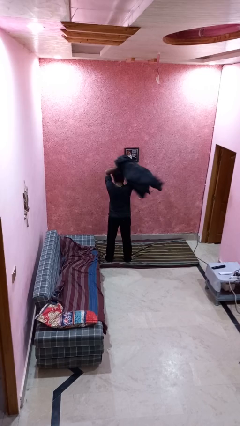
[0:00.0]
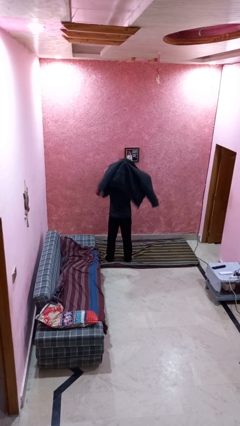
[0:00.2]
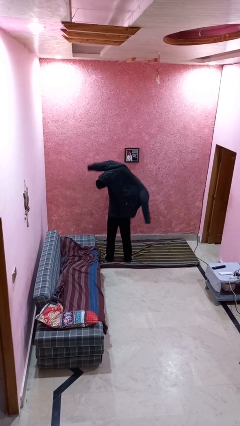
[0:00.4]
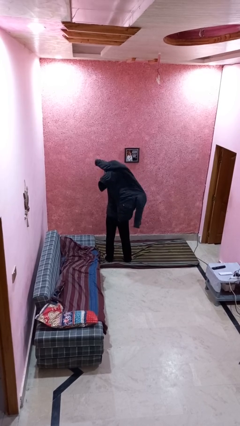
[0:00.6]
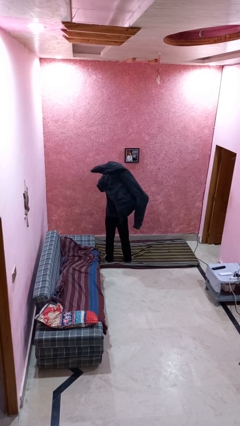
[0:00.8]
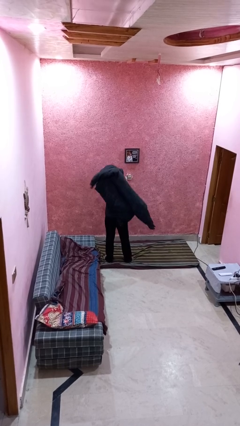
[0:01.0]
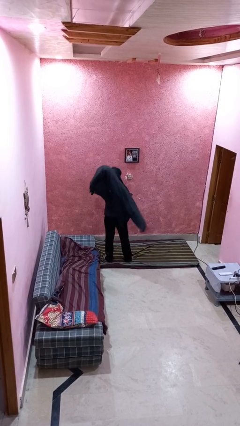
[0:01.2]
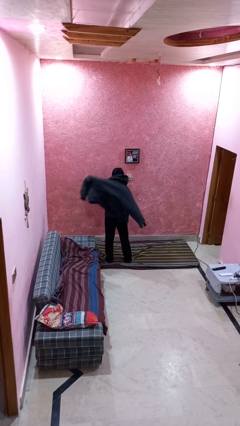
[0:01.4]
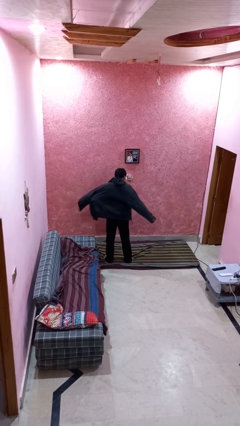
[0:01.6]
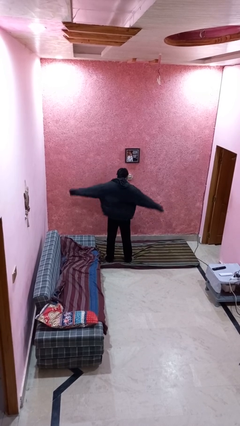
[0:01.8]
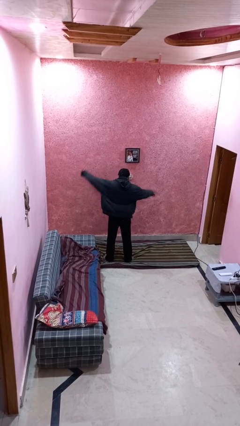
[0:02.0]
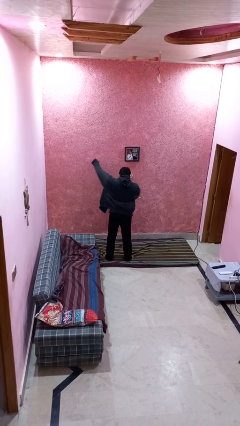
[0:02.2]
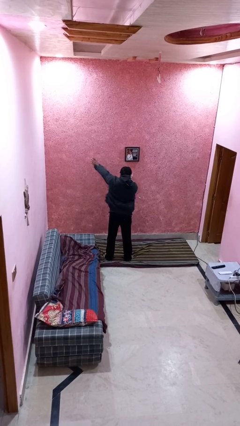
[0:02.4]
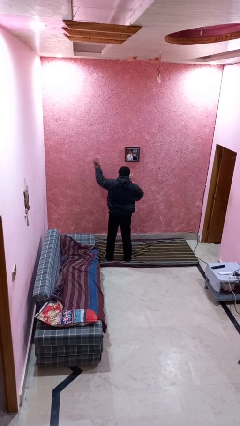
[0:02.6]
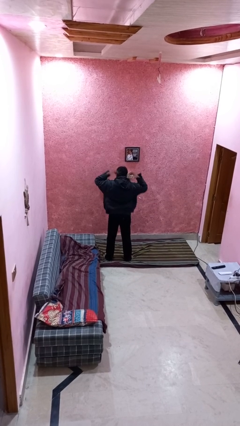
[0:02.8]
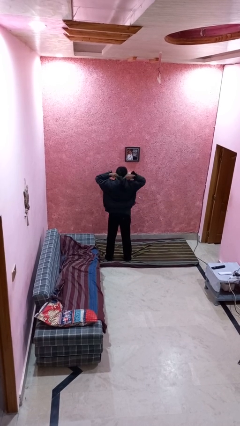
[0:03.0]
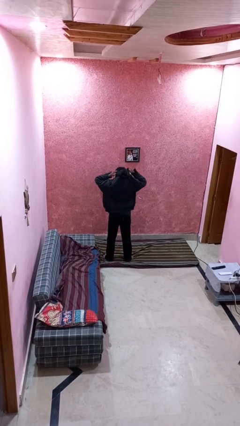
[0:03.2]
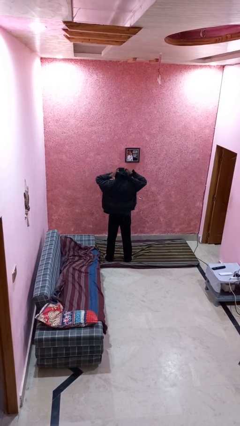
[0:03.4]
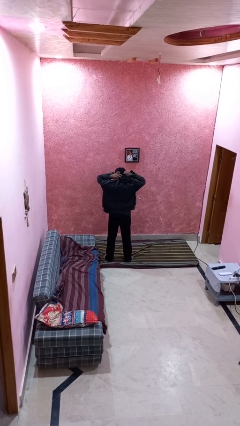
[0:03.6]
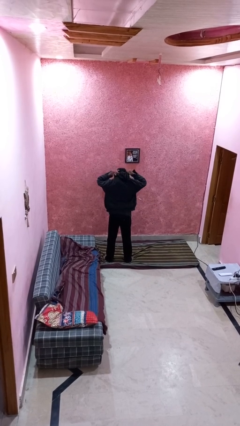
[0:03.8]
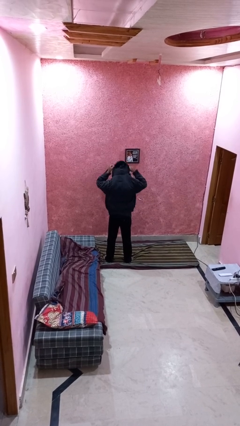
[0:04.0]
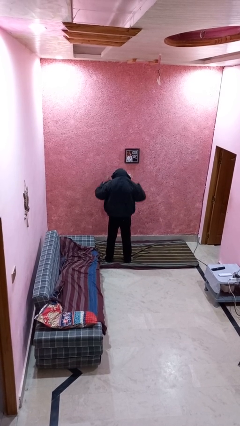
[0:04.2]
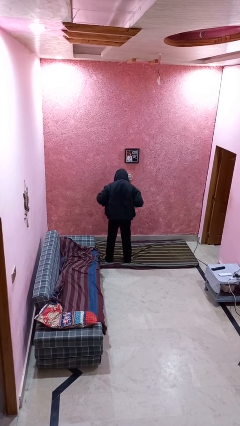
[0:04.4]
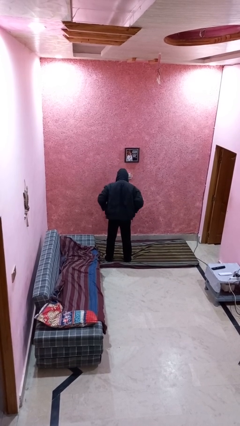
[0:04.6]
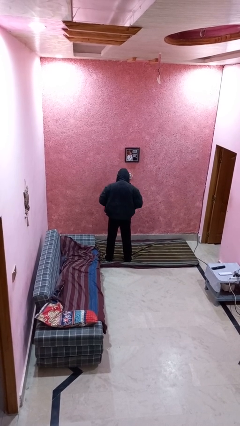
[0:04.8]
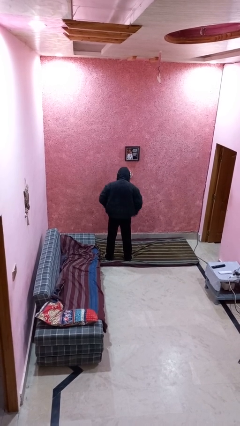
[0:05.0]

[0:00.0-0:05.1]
person puts on hoodie

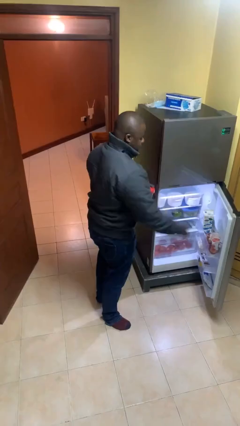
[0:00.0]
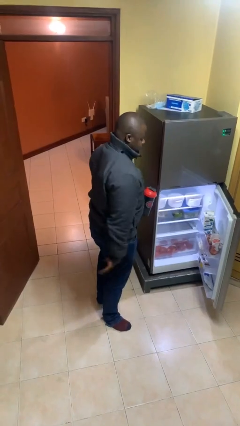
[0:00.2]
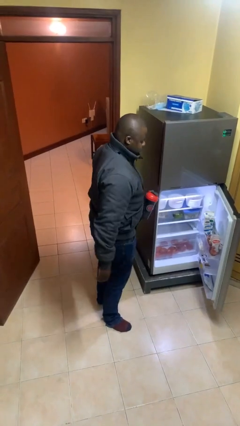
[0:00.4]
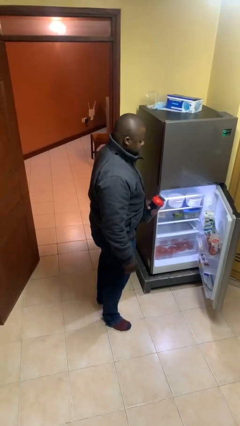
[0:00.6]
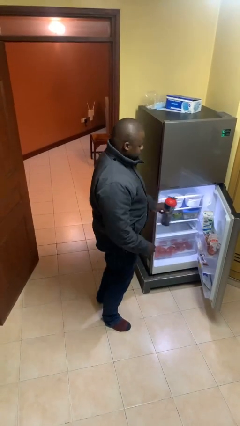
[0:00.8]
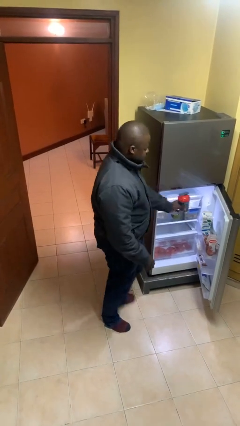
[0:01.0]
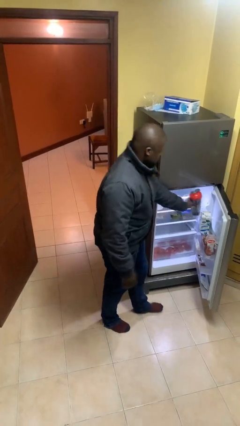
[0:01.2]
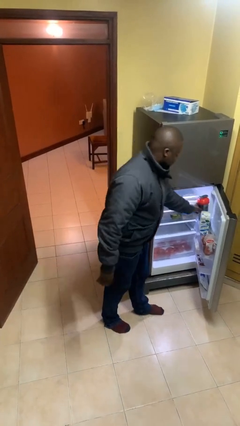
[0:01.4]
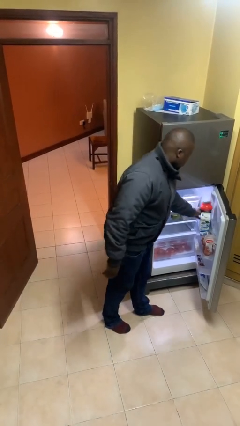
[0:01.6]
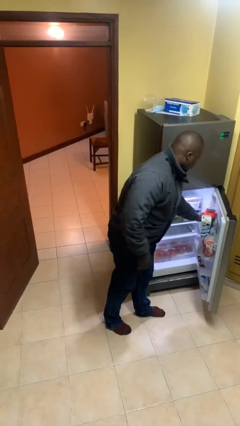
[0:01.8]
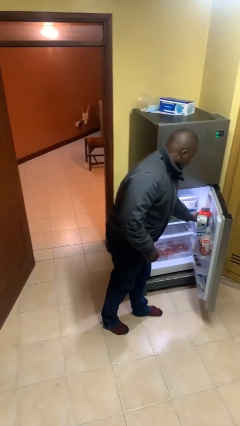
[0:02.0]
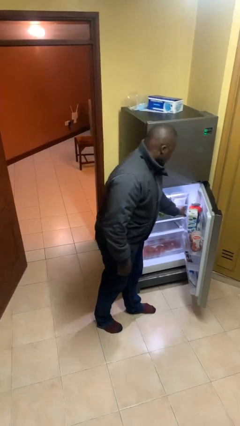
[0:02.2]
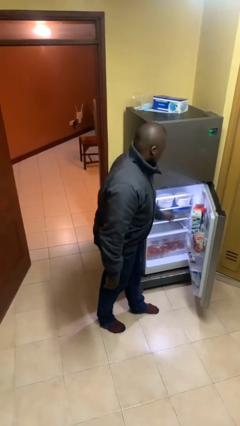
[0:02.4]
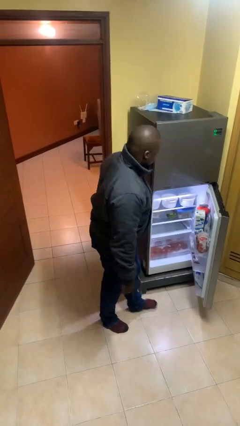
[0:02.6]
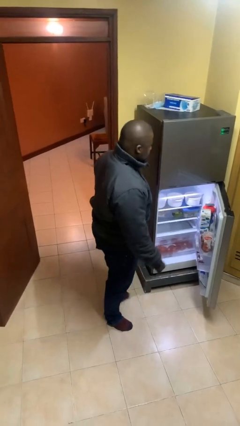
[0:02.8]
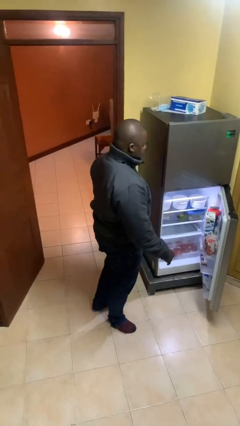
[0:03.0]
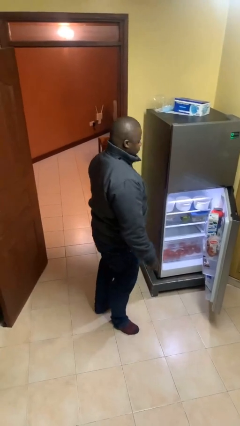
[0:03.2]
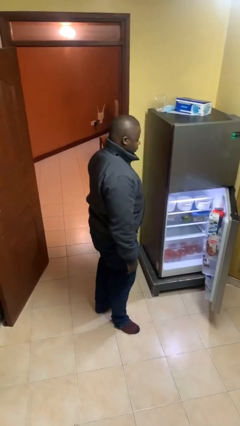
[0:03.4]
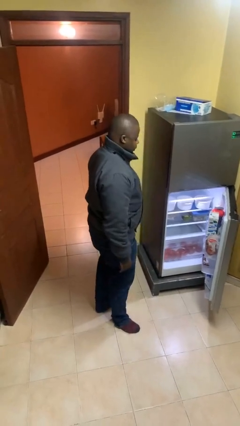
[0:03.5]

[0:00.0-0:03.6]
person puts object into refrigerator

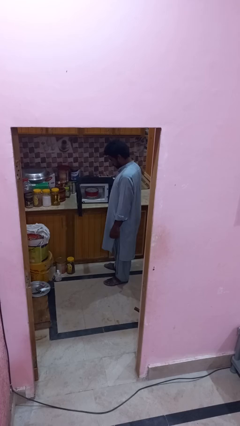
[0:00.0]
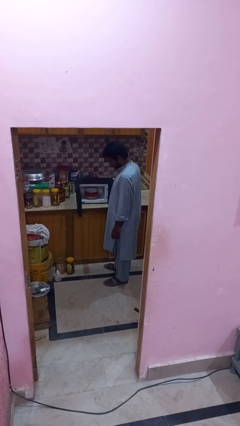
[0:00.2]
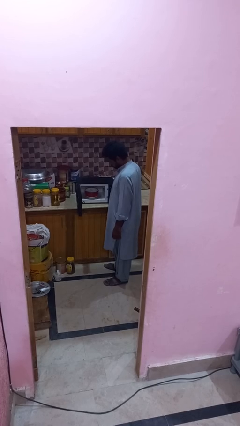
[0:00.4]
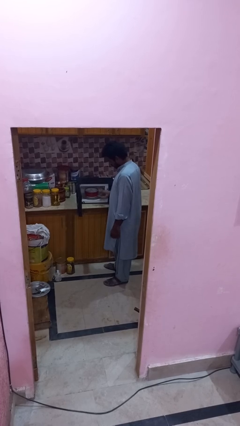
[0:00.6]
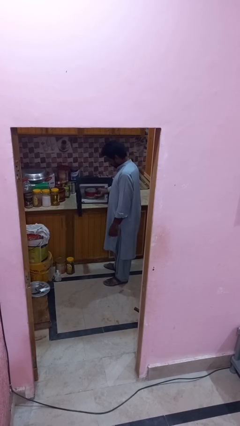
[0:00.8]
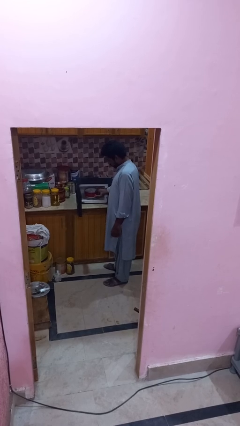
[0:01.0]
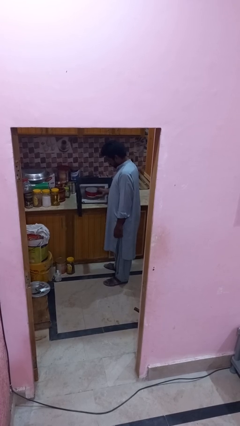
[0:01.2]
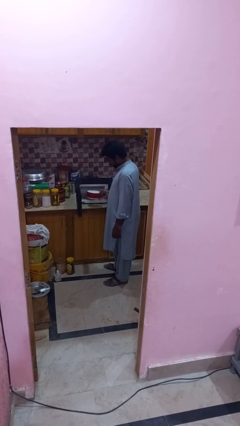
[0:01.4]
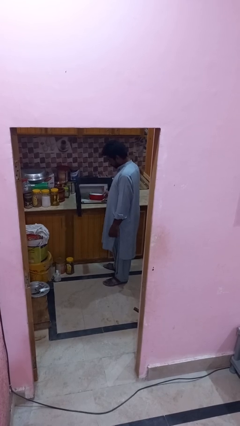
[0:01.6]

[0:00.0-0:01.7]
person takes object from microwave

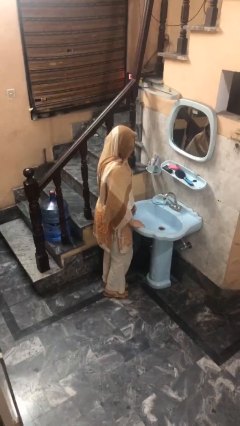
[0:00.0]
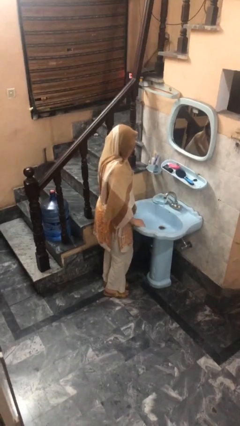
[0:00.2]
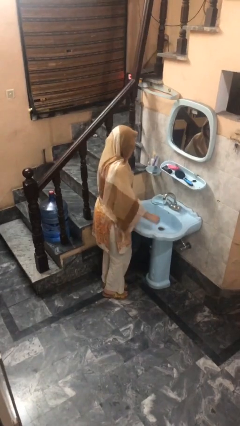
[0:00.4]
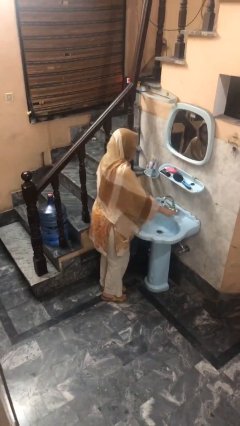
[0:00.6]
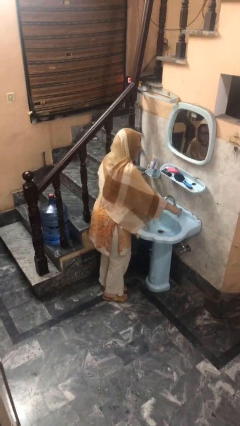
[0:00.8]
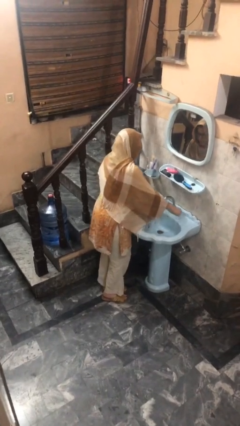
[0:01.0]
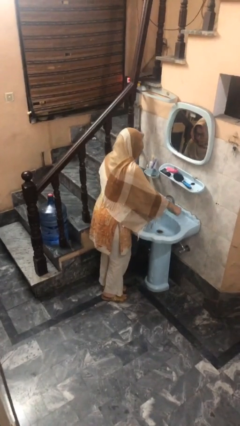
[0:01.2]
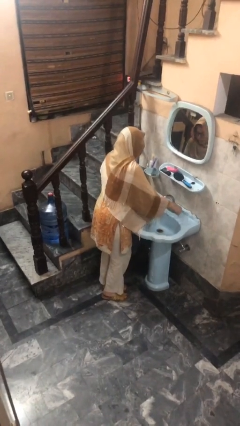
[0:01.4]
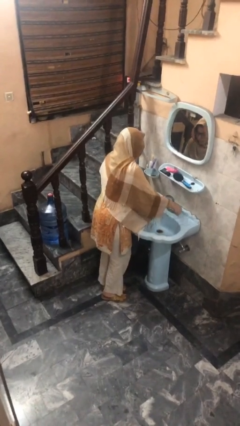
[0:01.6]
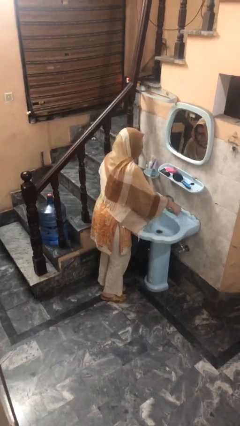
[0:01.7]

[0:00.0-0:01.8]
person turns off faucet

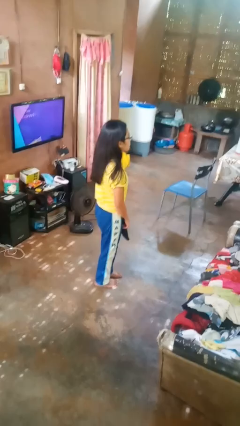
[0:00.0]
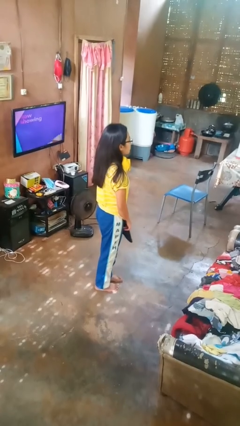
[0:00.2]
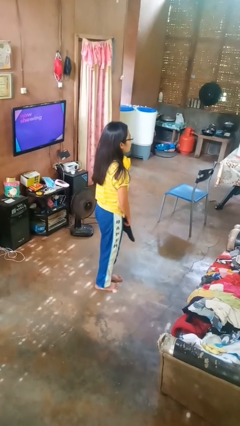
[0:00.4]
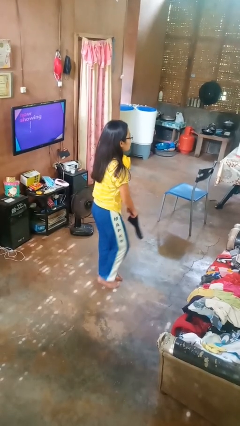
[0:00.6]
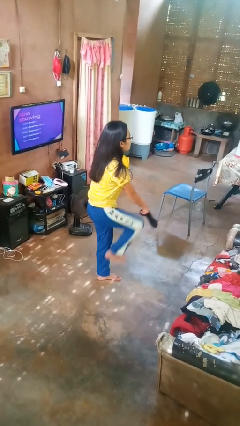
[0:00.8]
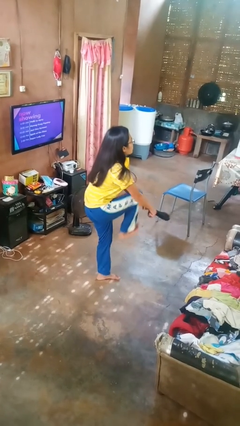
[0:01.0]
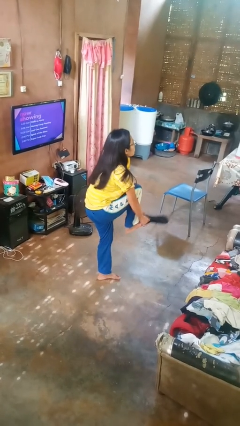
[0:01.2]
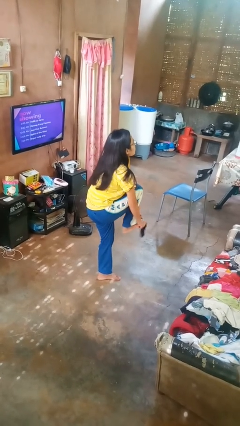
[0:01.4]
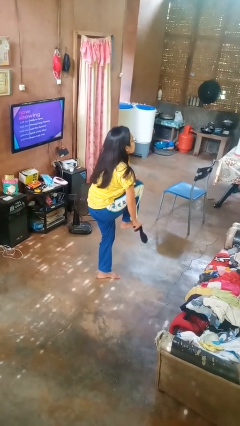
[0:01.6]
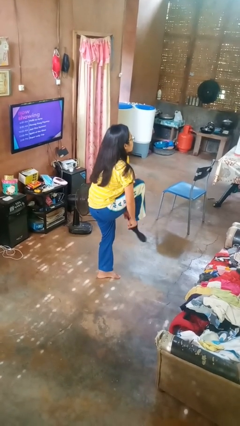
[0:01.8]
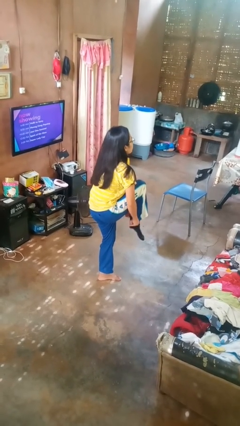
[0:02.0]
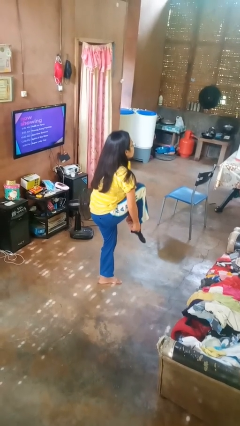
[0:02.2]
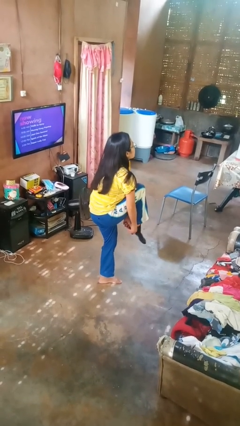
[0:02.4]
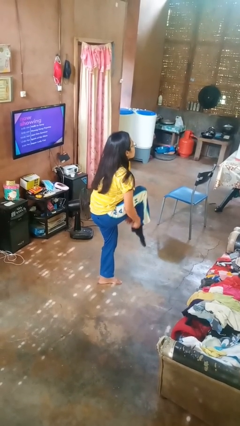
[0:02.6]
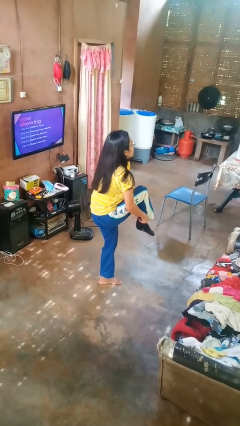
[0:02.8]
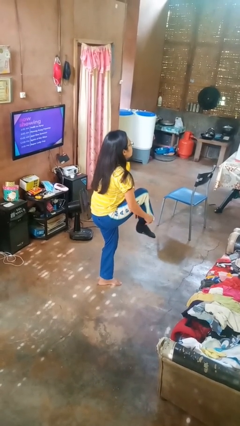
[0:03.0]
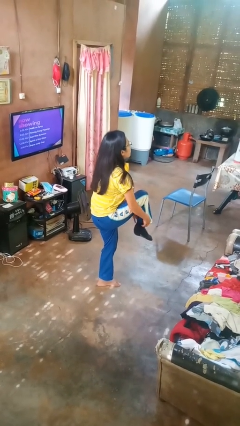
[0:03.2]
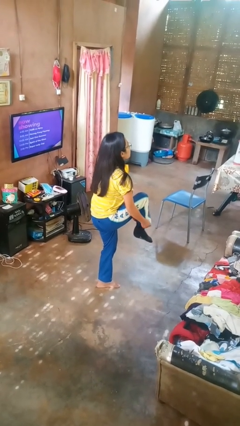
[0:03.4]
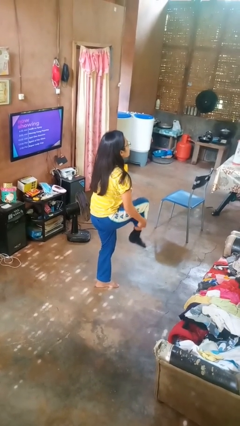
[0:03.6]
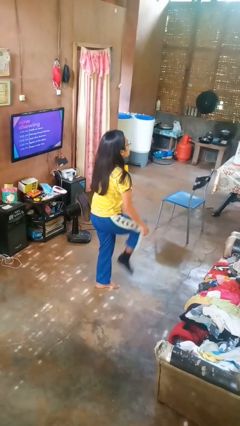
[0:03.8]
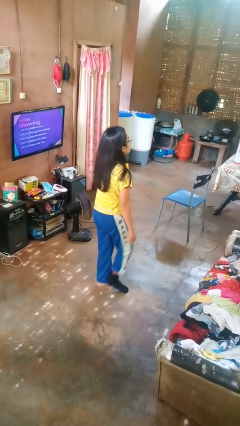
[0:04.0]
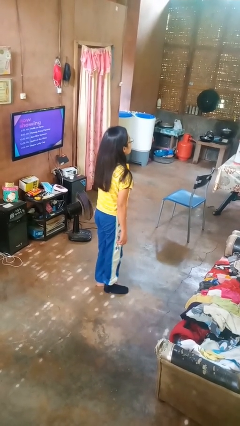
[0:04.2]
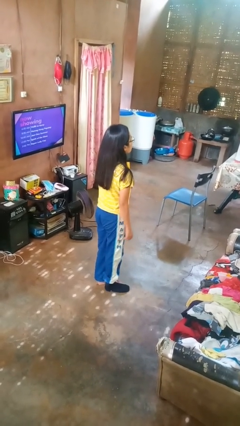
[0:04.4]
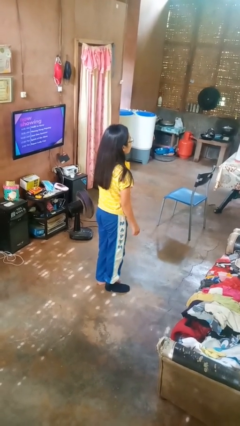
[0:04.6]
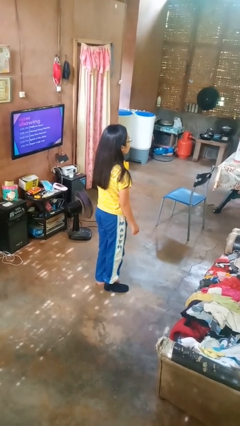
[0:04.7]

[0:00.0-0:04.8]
person puts on socks

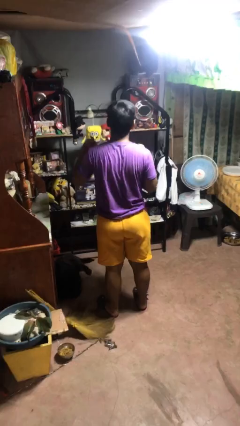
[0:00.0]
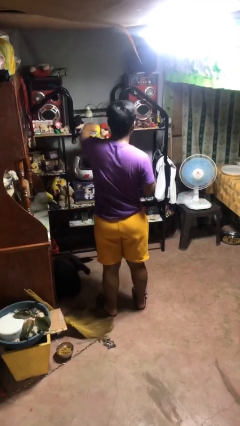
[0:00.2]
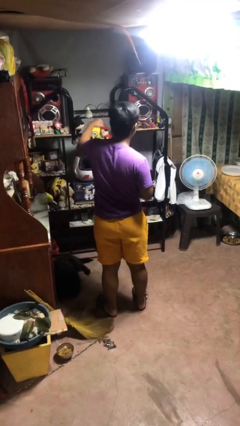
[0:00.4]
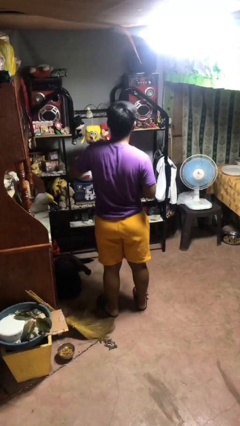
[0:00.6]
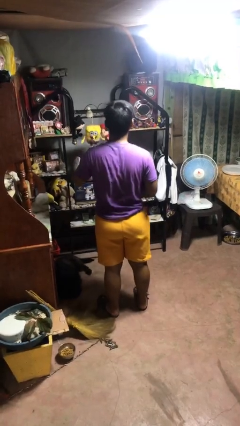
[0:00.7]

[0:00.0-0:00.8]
person punches

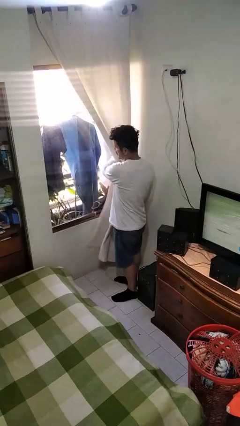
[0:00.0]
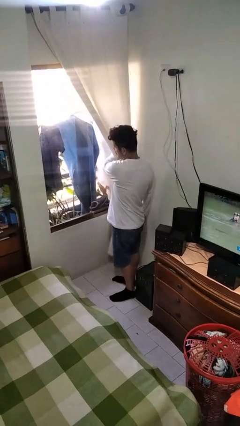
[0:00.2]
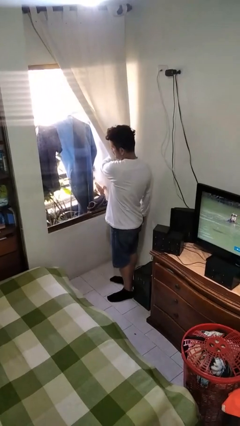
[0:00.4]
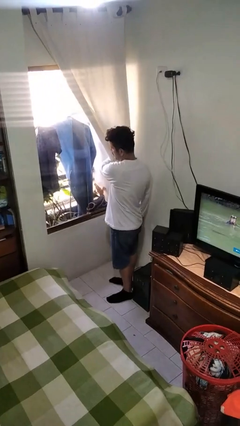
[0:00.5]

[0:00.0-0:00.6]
person opens curtains
